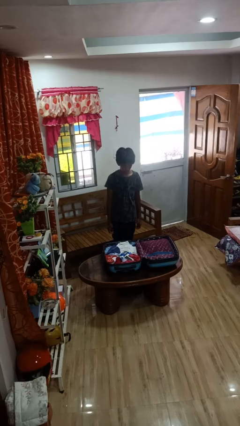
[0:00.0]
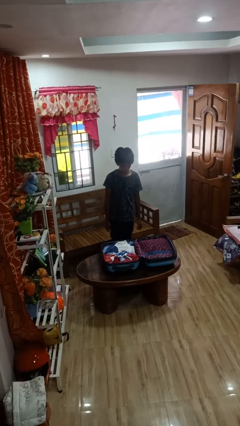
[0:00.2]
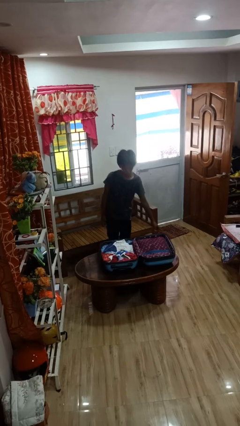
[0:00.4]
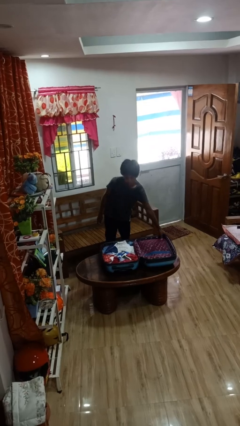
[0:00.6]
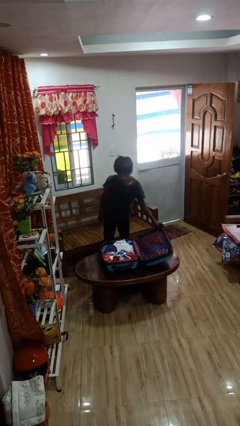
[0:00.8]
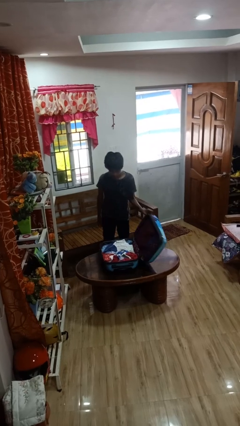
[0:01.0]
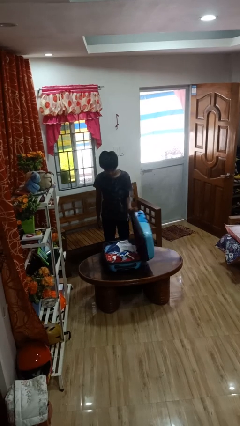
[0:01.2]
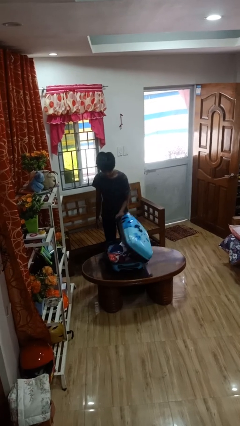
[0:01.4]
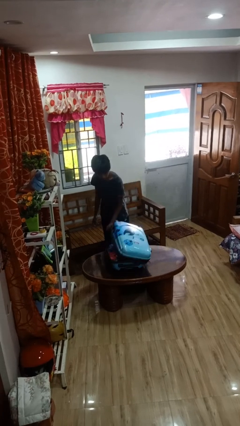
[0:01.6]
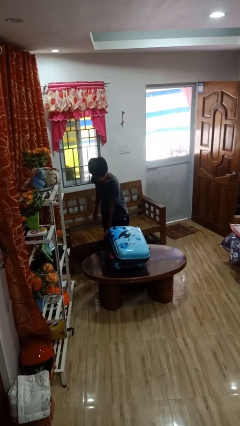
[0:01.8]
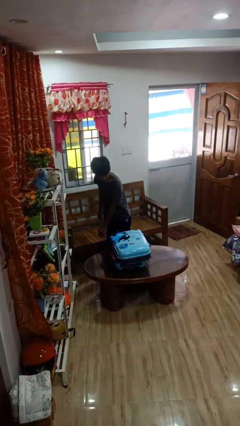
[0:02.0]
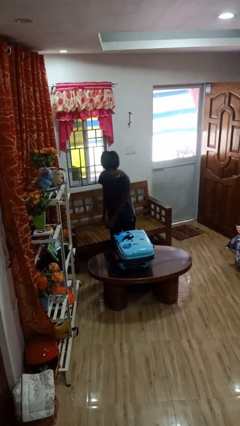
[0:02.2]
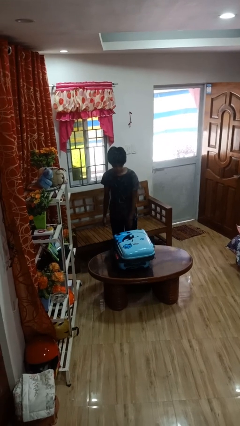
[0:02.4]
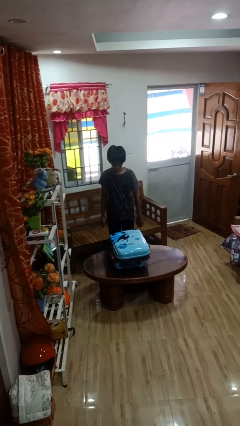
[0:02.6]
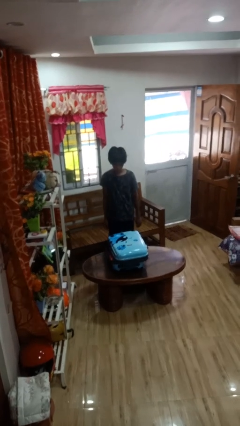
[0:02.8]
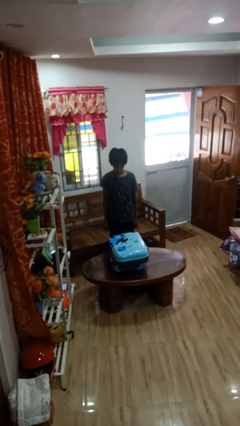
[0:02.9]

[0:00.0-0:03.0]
person closes suitcase

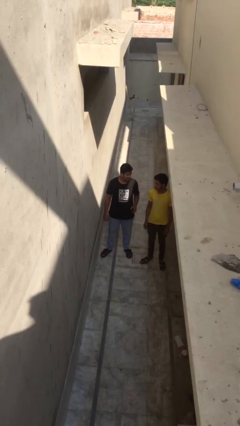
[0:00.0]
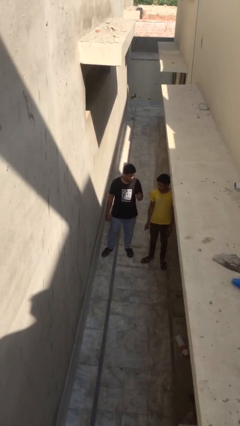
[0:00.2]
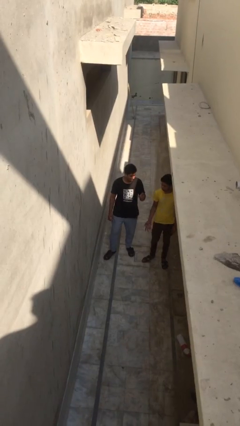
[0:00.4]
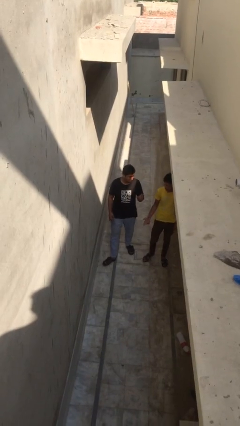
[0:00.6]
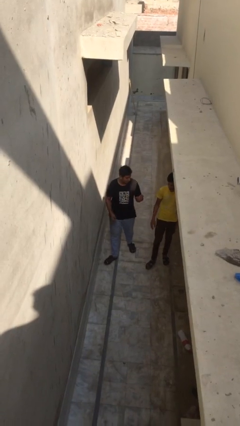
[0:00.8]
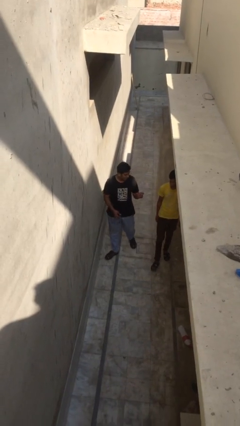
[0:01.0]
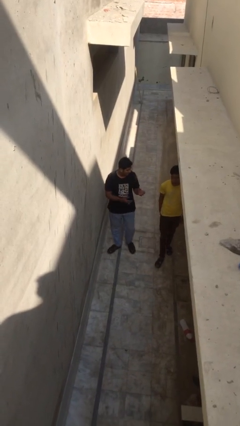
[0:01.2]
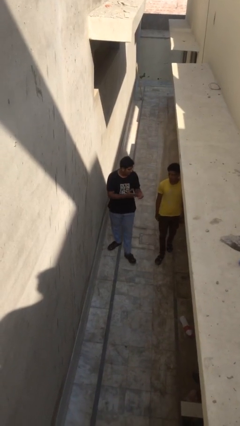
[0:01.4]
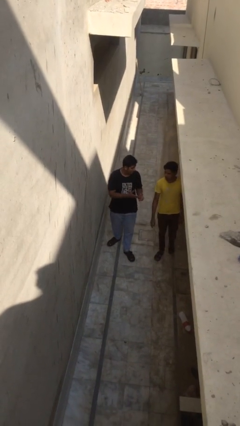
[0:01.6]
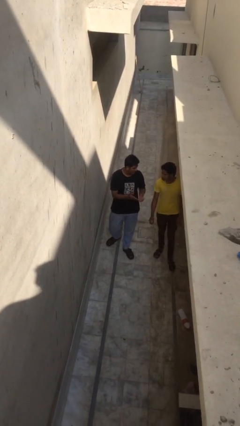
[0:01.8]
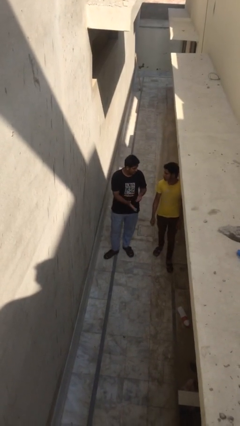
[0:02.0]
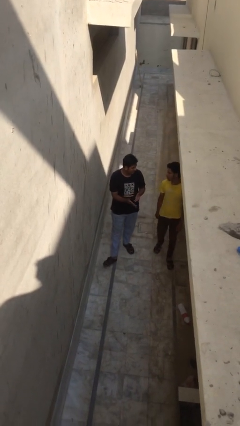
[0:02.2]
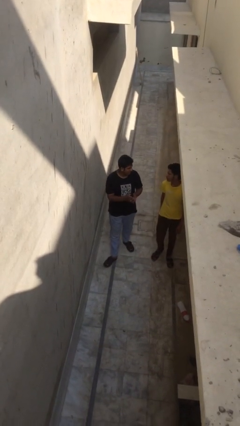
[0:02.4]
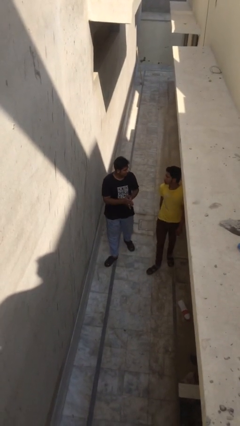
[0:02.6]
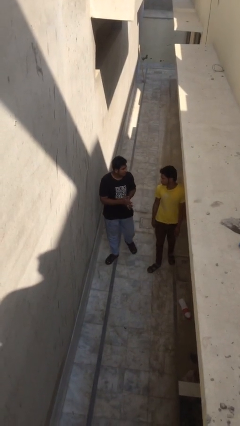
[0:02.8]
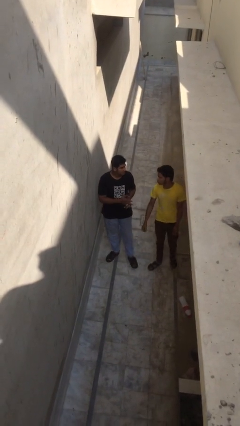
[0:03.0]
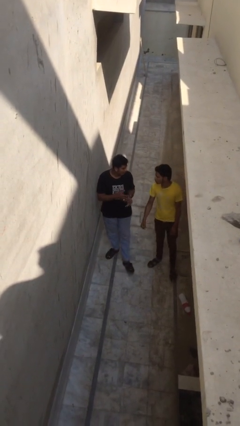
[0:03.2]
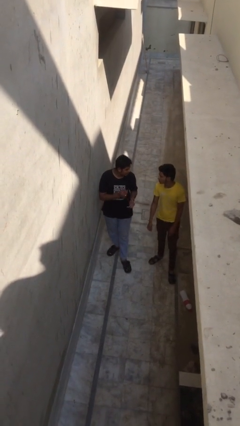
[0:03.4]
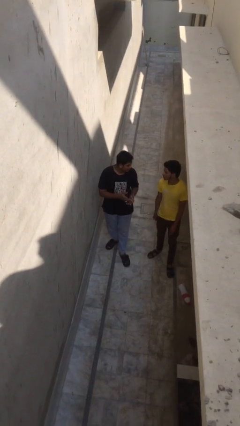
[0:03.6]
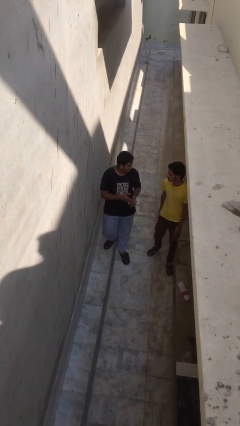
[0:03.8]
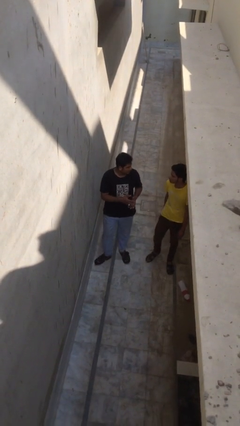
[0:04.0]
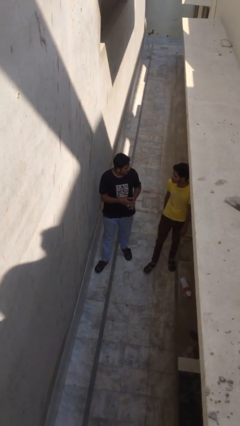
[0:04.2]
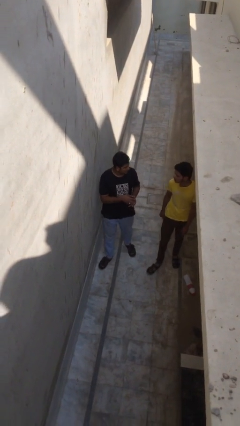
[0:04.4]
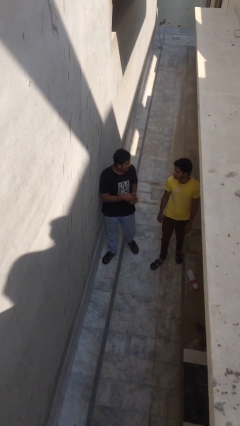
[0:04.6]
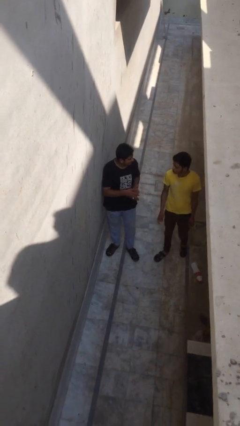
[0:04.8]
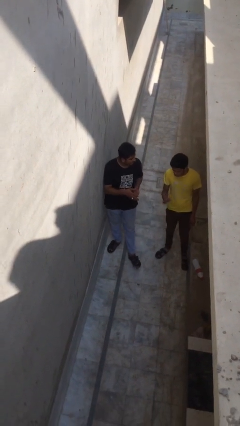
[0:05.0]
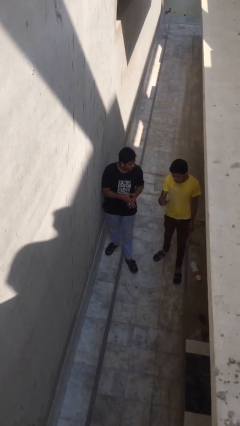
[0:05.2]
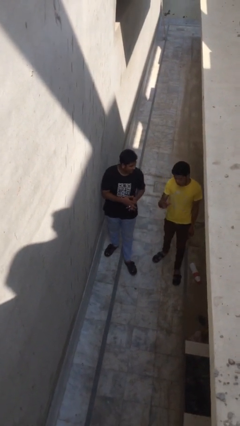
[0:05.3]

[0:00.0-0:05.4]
person talks to person

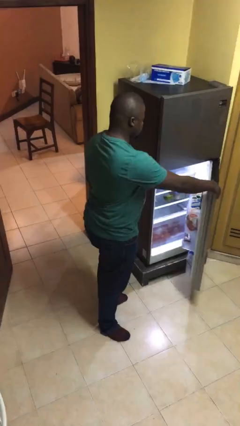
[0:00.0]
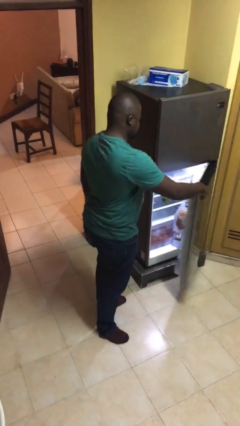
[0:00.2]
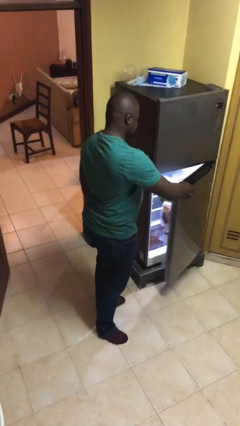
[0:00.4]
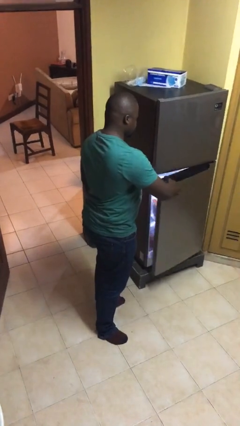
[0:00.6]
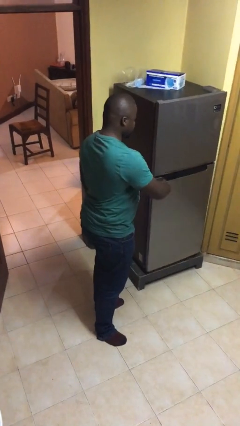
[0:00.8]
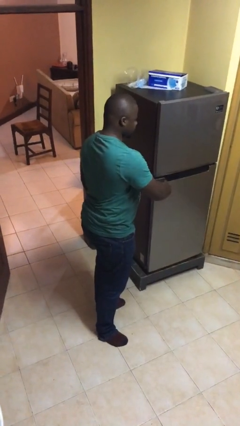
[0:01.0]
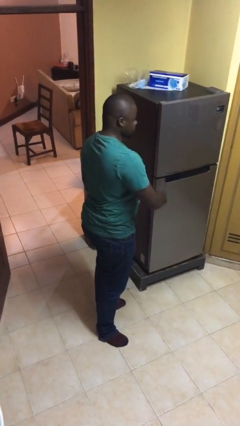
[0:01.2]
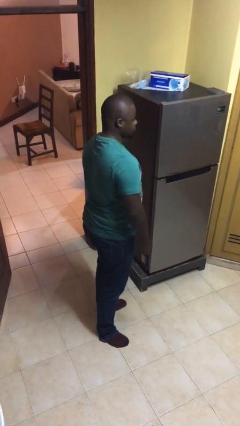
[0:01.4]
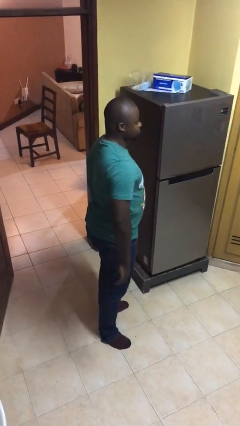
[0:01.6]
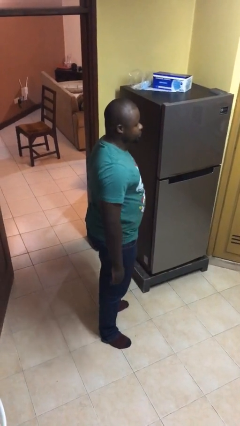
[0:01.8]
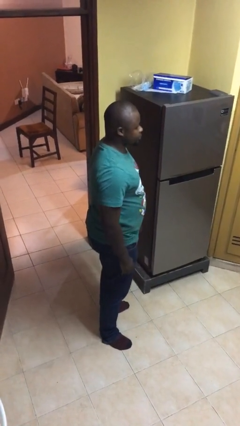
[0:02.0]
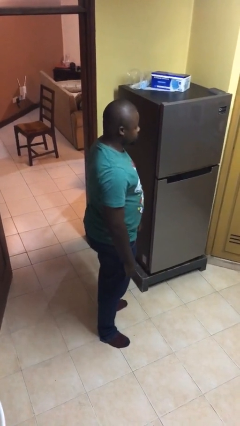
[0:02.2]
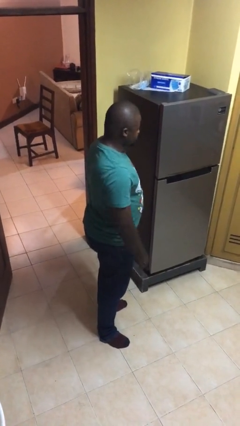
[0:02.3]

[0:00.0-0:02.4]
person closes refrigerator

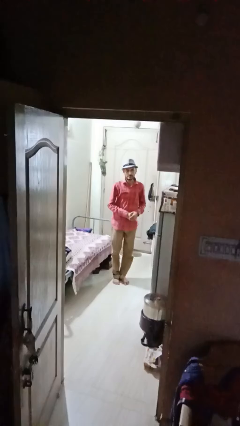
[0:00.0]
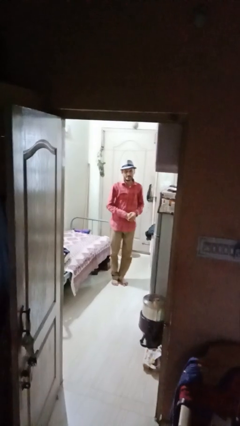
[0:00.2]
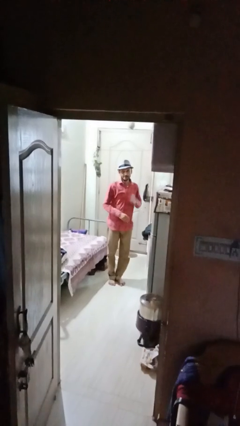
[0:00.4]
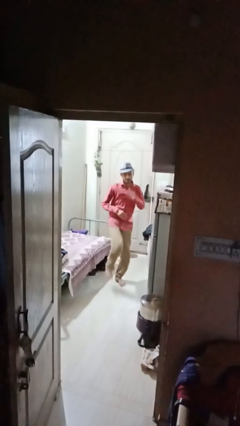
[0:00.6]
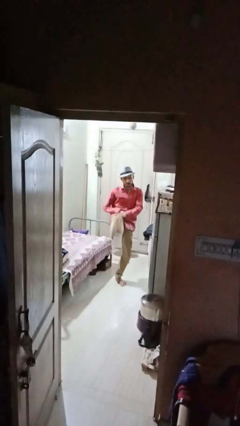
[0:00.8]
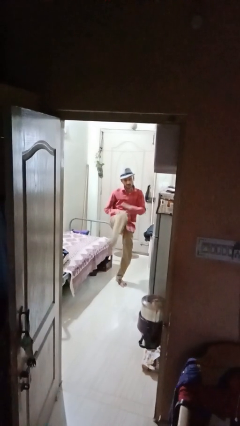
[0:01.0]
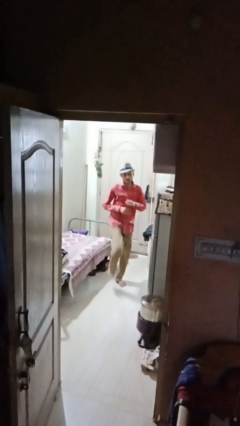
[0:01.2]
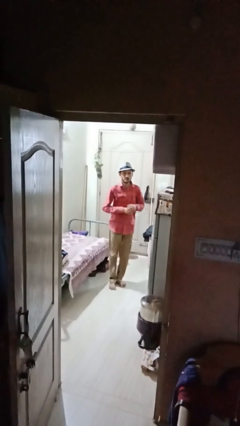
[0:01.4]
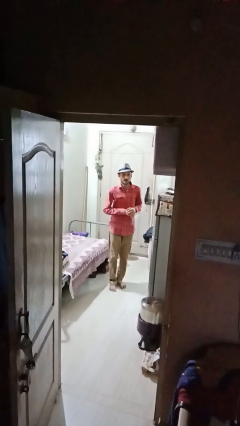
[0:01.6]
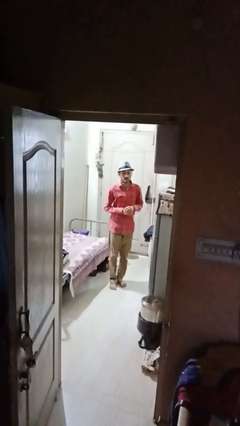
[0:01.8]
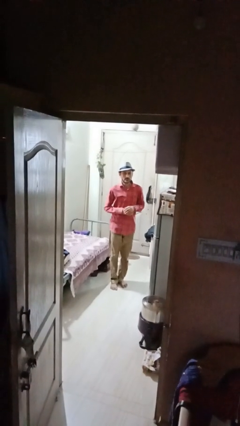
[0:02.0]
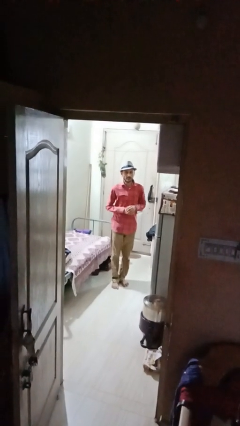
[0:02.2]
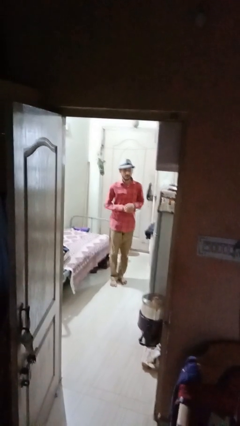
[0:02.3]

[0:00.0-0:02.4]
person karate kicks

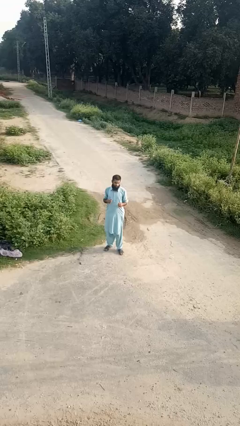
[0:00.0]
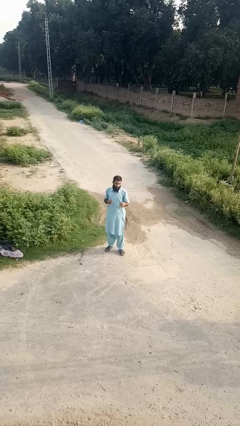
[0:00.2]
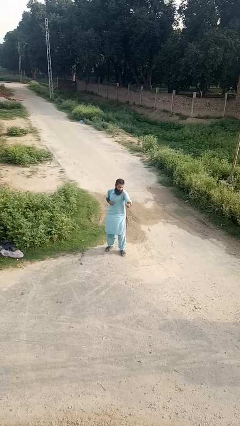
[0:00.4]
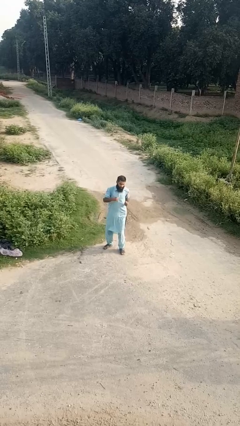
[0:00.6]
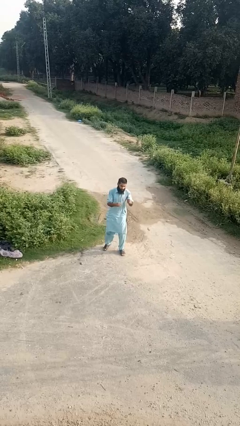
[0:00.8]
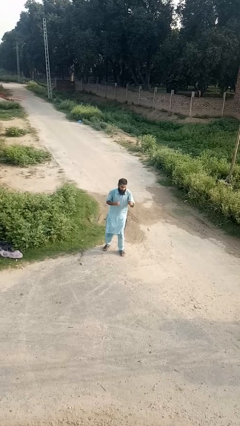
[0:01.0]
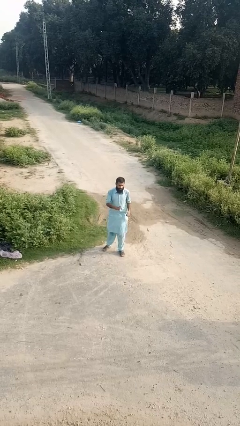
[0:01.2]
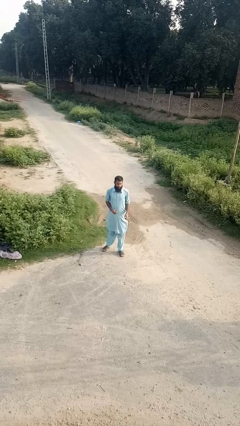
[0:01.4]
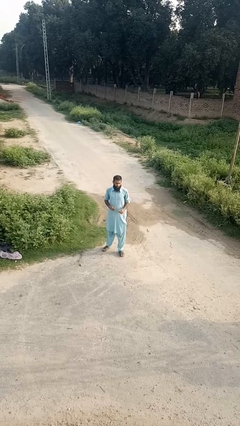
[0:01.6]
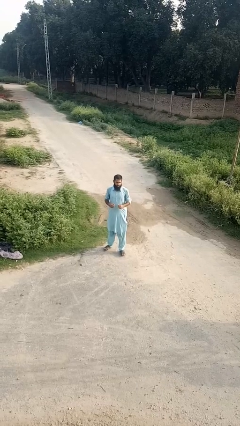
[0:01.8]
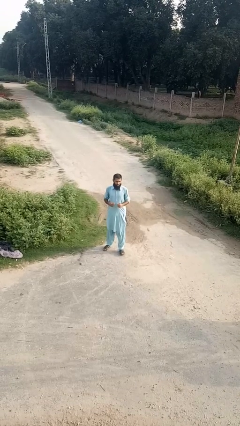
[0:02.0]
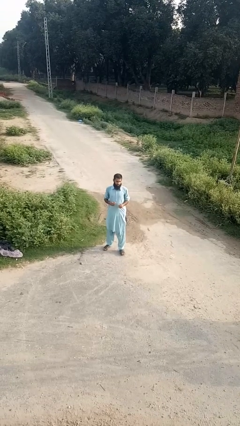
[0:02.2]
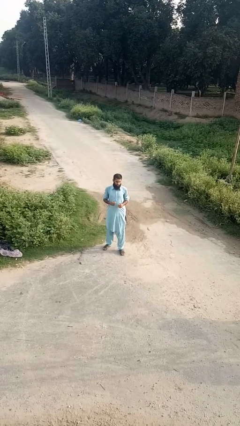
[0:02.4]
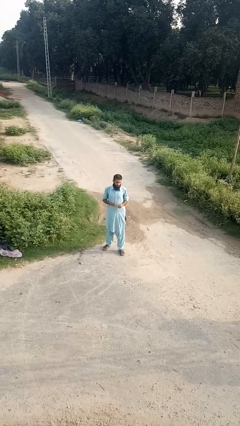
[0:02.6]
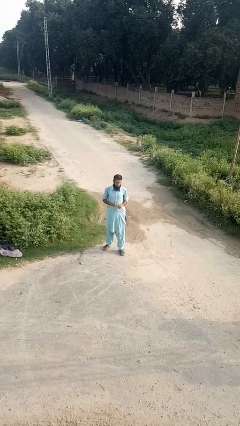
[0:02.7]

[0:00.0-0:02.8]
person punches

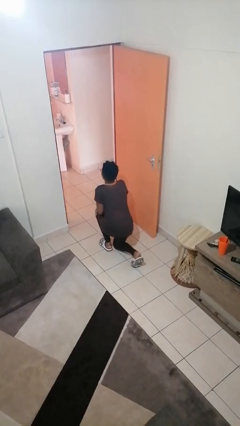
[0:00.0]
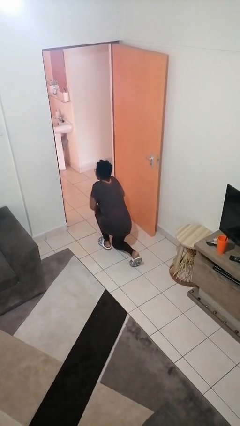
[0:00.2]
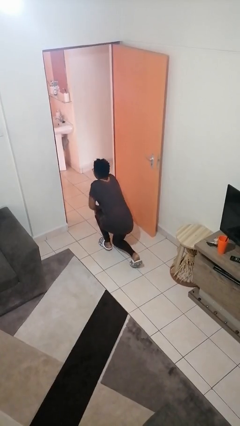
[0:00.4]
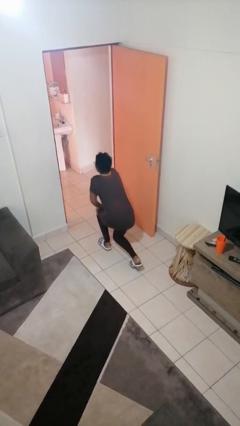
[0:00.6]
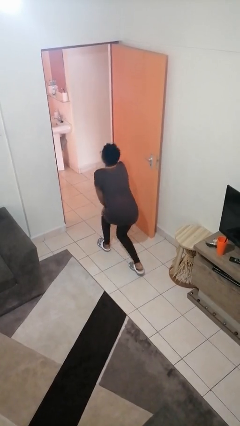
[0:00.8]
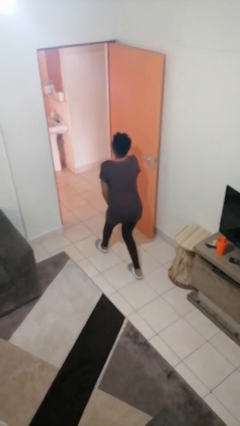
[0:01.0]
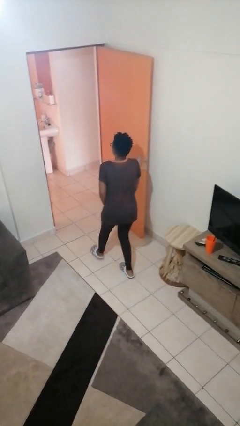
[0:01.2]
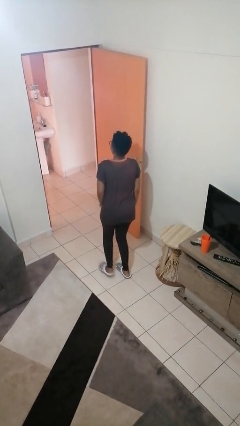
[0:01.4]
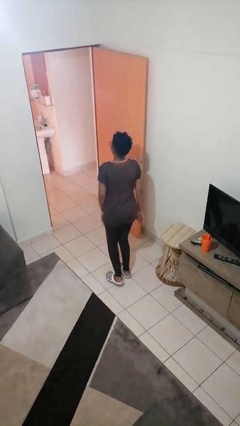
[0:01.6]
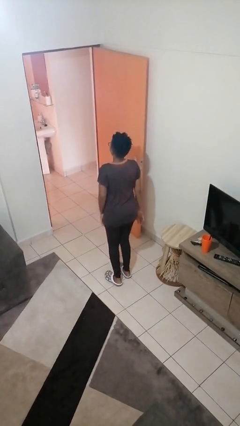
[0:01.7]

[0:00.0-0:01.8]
person stands up from floor
